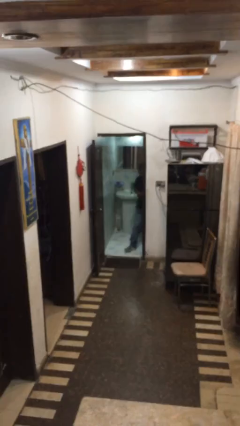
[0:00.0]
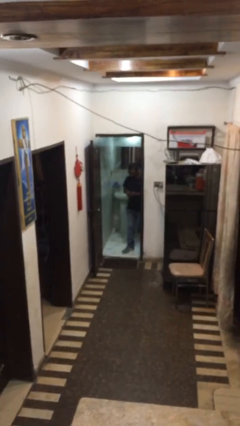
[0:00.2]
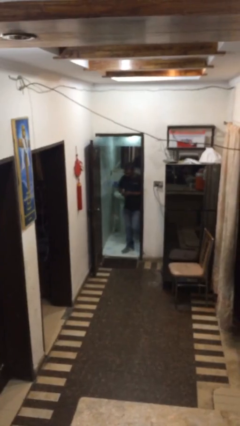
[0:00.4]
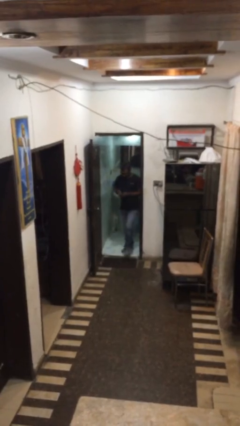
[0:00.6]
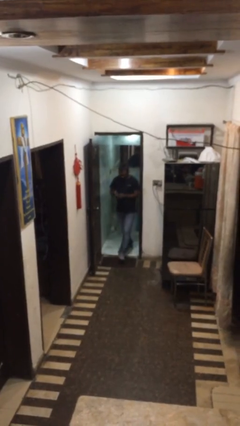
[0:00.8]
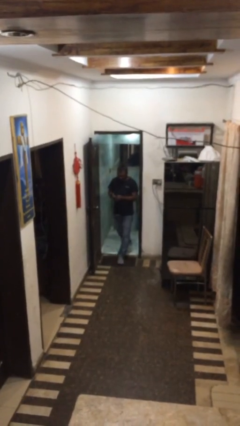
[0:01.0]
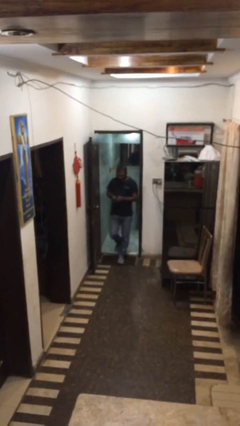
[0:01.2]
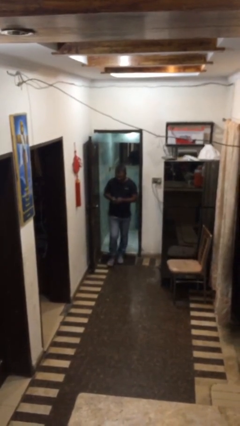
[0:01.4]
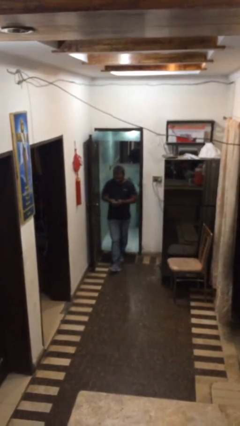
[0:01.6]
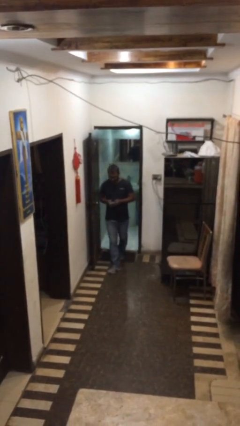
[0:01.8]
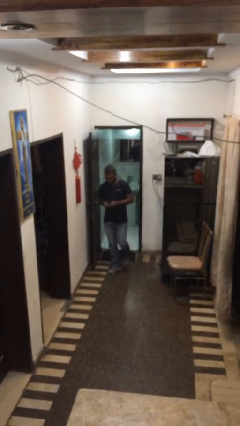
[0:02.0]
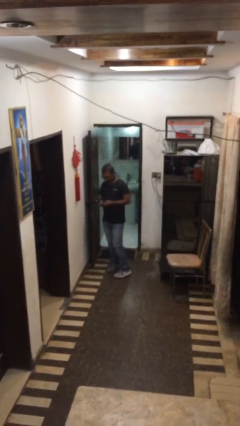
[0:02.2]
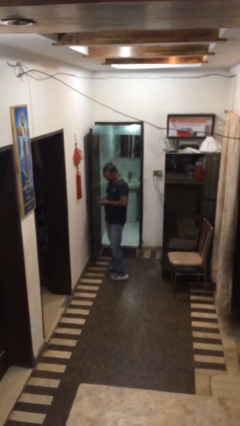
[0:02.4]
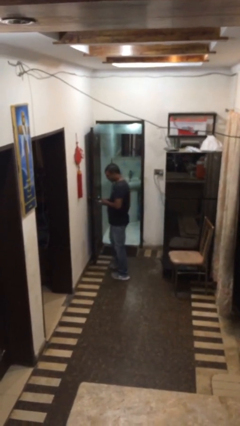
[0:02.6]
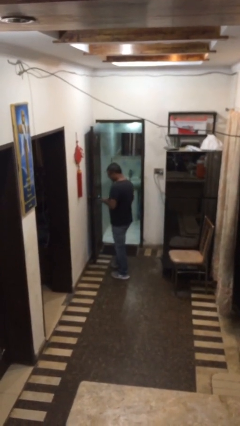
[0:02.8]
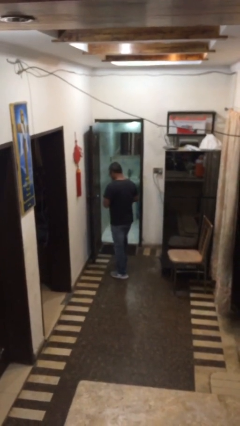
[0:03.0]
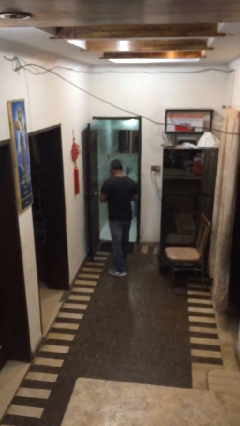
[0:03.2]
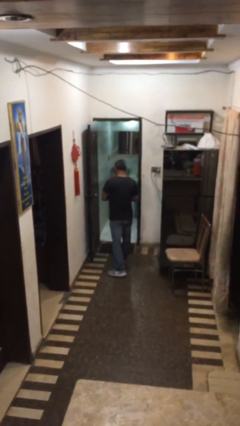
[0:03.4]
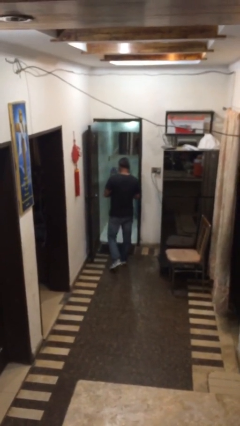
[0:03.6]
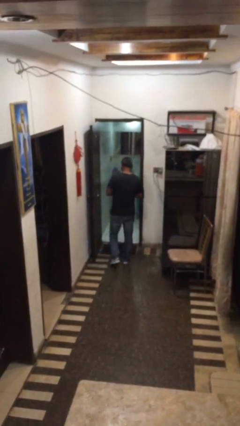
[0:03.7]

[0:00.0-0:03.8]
person enters scene through structure

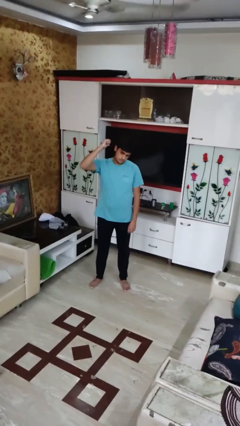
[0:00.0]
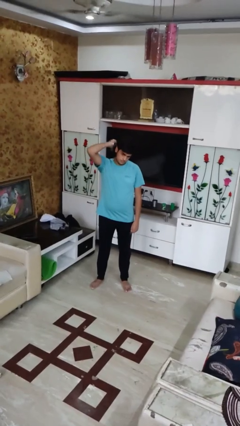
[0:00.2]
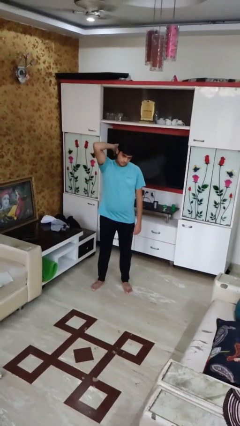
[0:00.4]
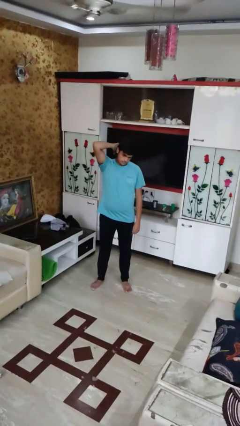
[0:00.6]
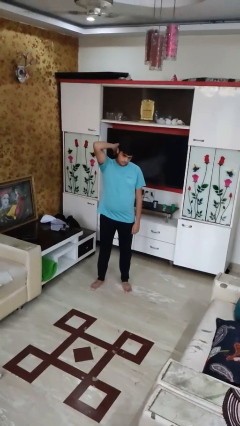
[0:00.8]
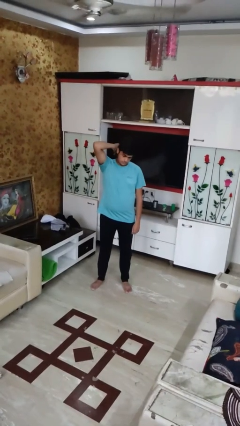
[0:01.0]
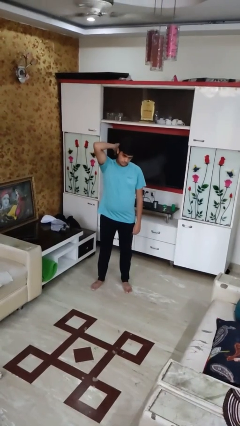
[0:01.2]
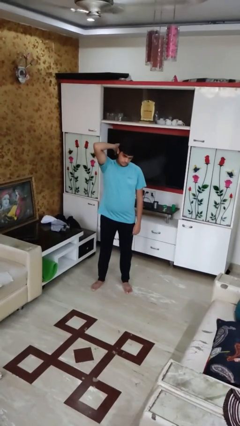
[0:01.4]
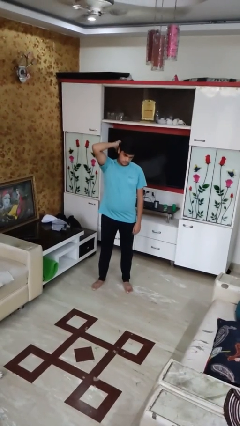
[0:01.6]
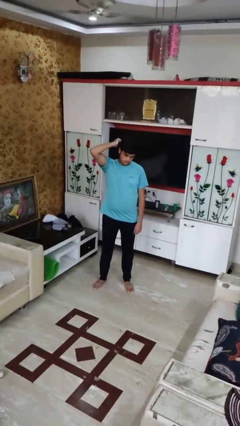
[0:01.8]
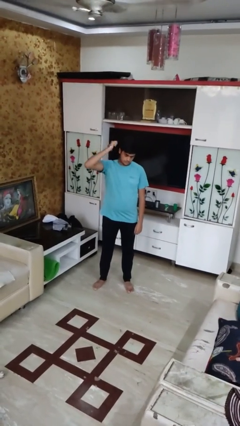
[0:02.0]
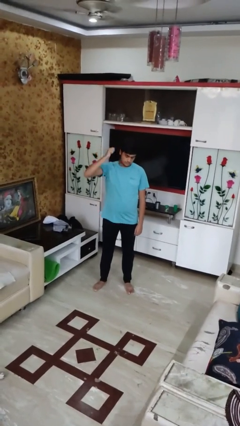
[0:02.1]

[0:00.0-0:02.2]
person gestures behind me

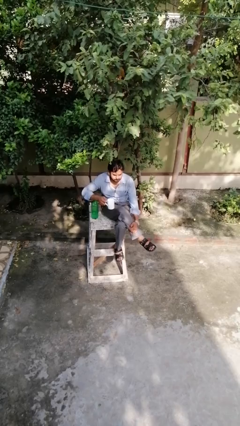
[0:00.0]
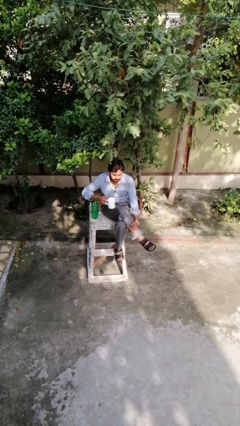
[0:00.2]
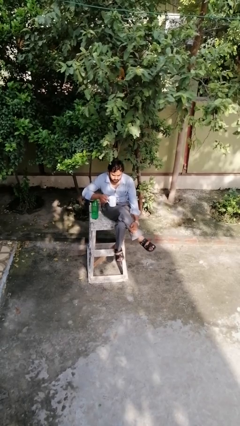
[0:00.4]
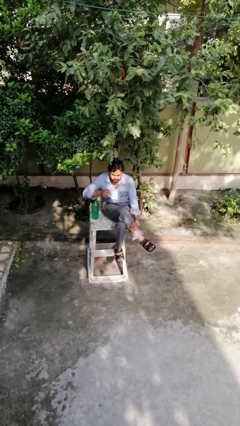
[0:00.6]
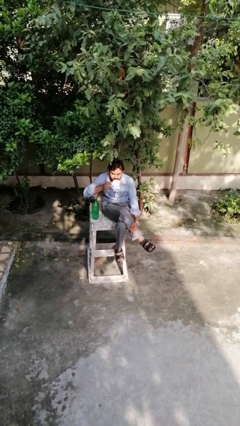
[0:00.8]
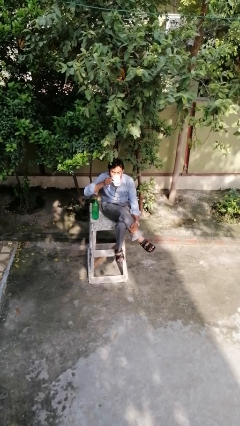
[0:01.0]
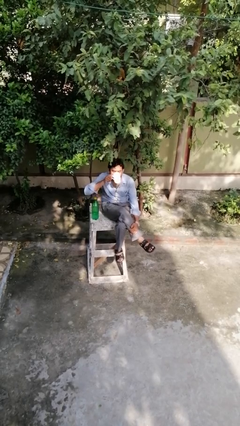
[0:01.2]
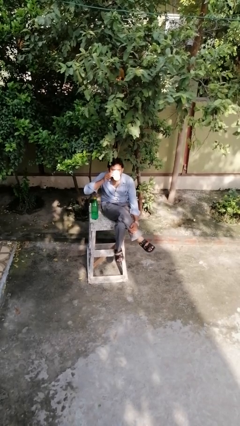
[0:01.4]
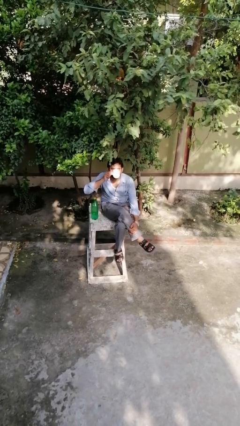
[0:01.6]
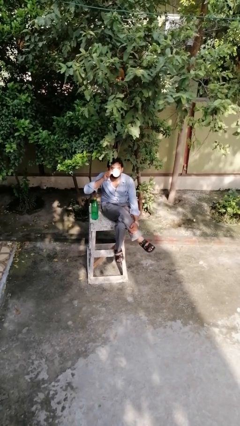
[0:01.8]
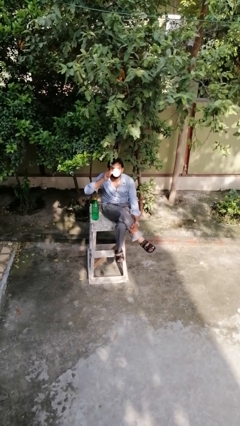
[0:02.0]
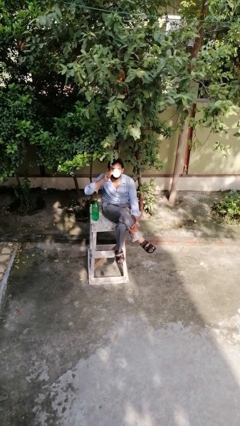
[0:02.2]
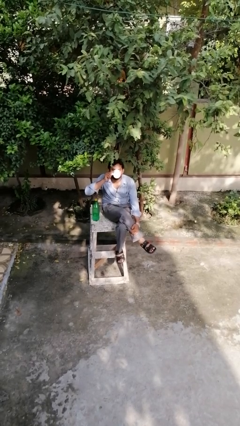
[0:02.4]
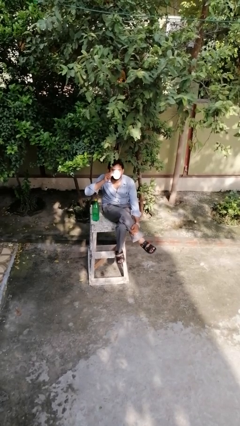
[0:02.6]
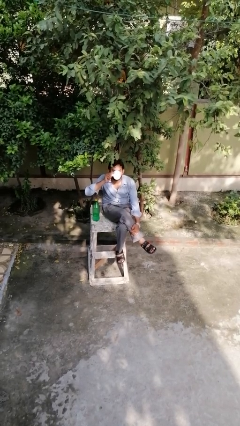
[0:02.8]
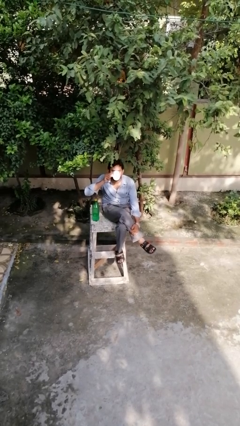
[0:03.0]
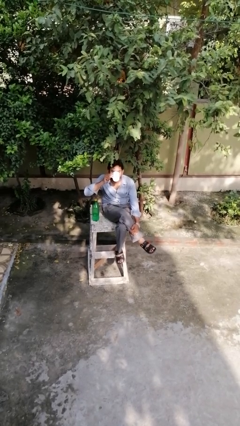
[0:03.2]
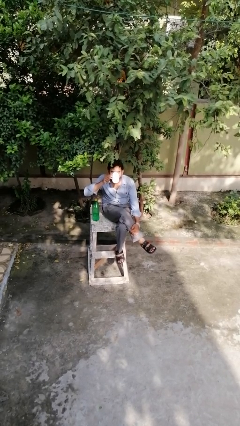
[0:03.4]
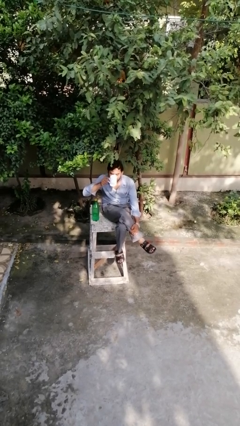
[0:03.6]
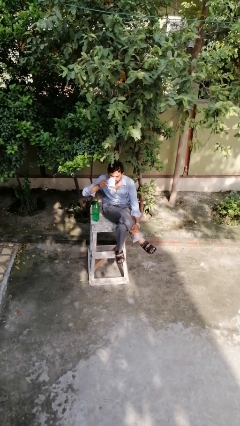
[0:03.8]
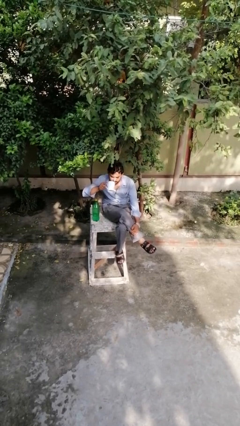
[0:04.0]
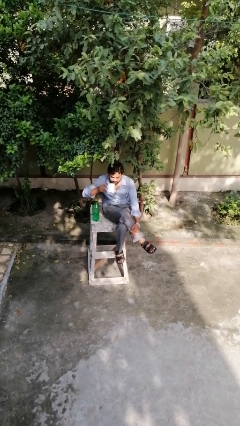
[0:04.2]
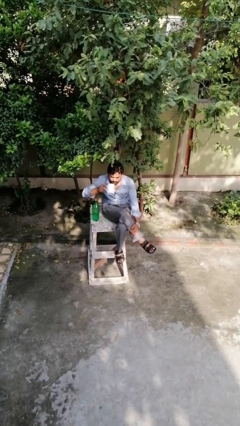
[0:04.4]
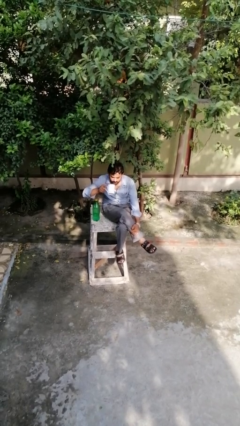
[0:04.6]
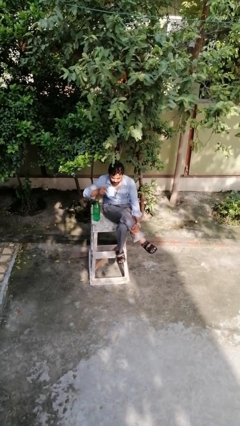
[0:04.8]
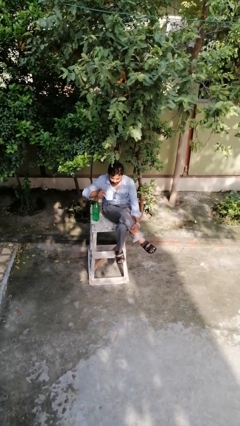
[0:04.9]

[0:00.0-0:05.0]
person drinks from mug

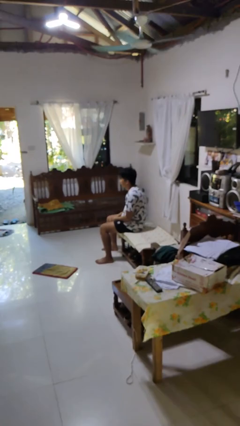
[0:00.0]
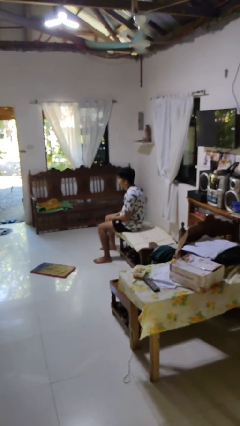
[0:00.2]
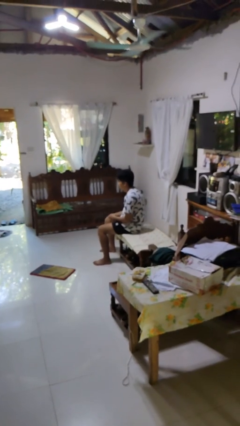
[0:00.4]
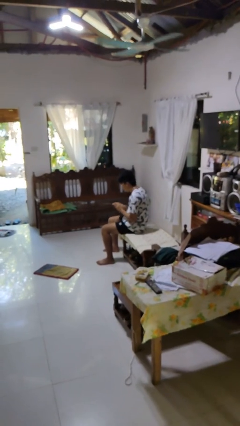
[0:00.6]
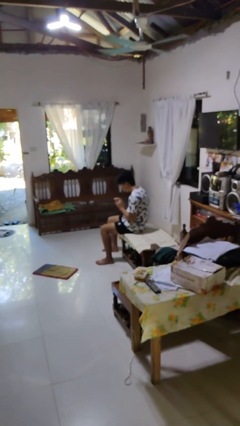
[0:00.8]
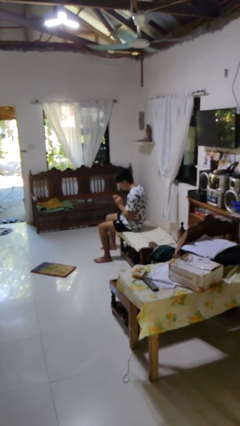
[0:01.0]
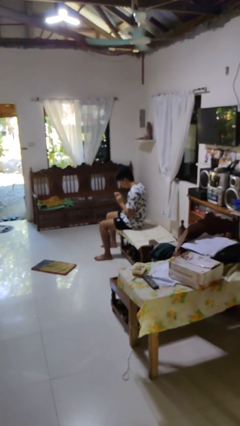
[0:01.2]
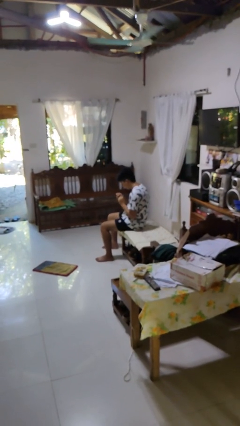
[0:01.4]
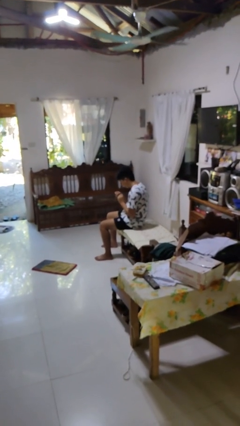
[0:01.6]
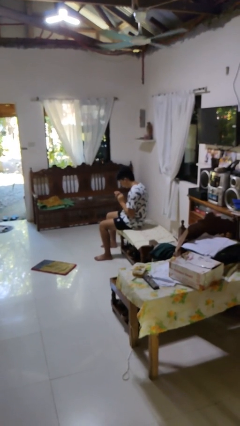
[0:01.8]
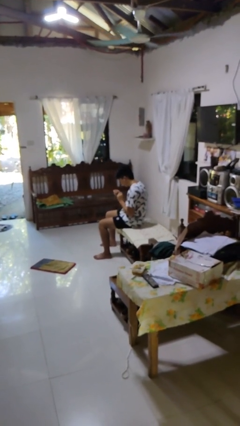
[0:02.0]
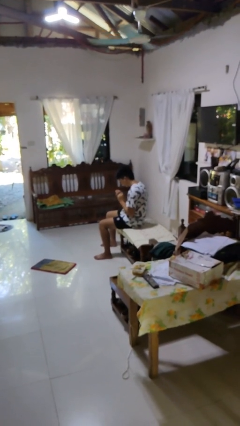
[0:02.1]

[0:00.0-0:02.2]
person files fingernails

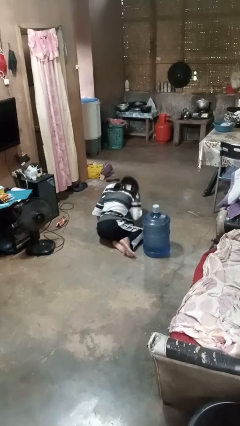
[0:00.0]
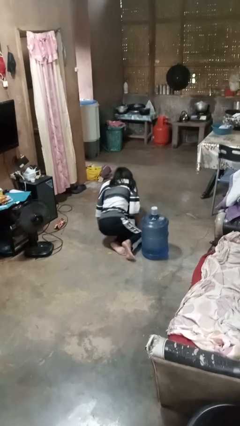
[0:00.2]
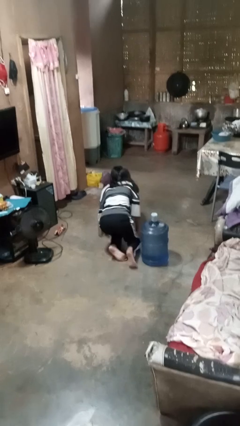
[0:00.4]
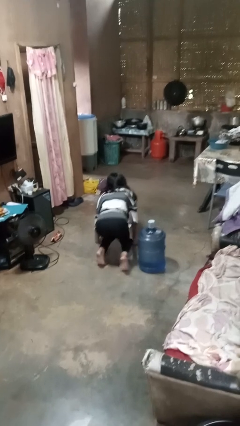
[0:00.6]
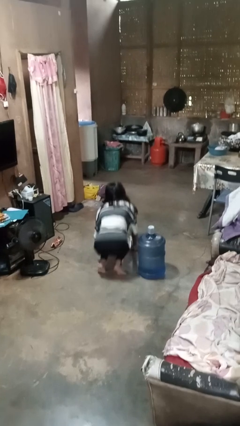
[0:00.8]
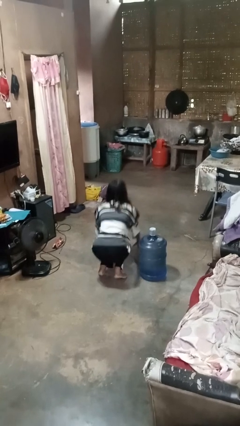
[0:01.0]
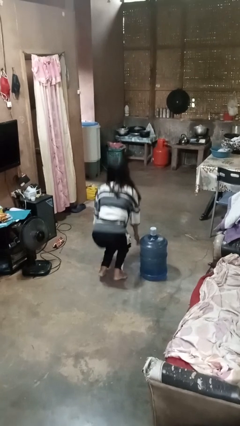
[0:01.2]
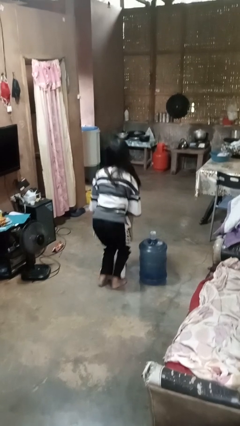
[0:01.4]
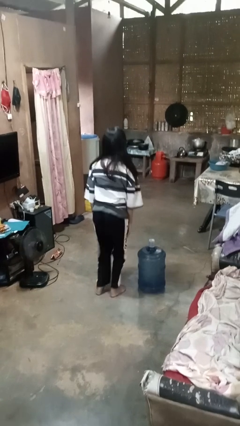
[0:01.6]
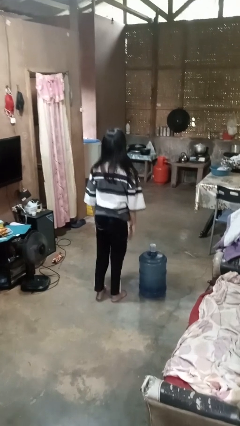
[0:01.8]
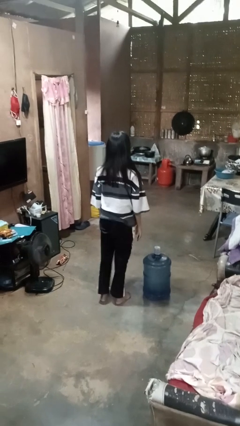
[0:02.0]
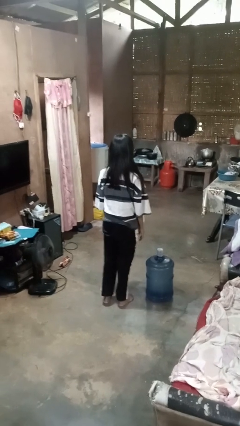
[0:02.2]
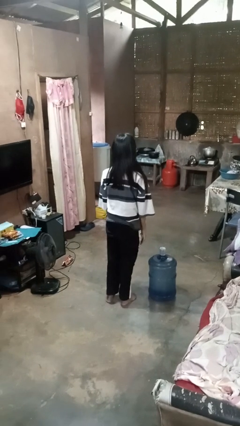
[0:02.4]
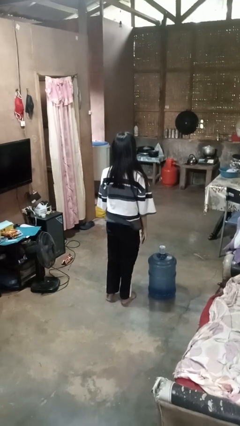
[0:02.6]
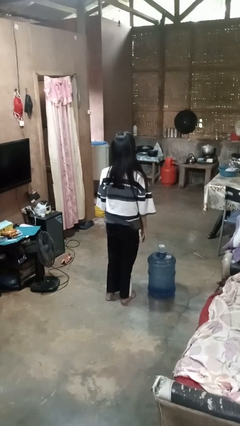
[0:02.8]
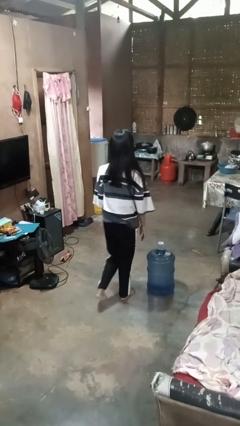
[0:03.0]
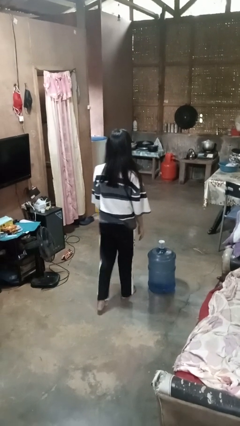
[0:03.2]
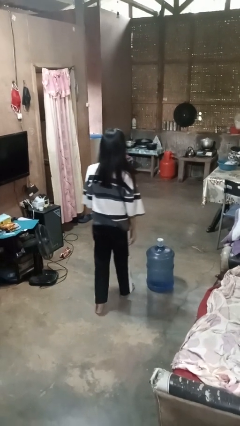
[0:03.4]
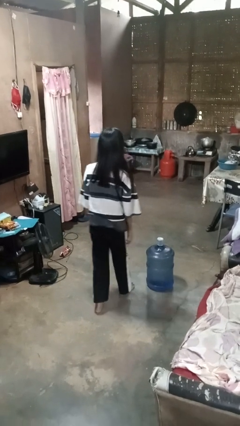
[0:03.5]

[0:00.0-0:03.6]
person stands up from floor

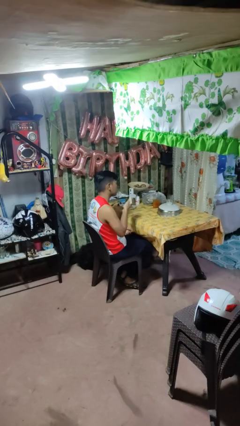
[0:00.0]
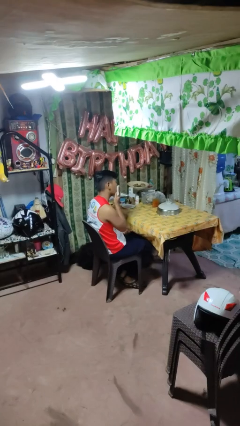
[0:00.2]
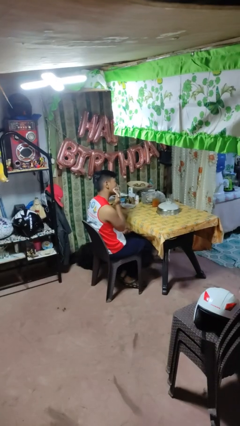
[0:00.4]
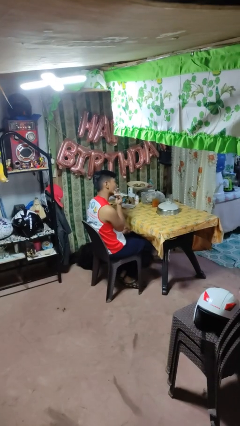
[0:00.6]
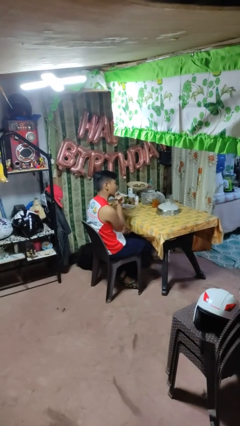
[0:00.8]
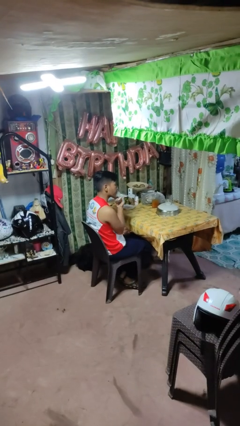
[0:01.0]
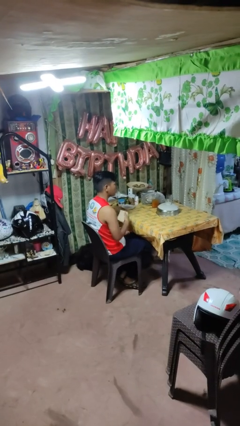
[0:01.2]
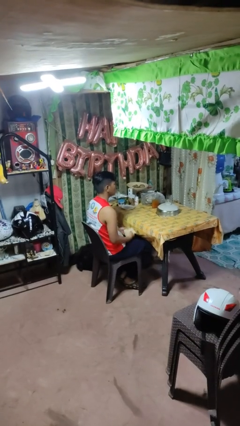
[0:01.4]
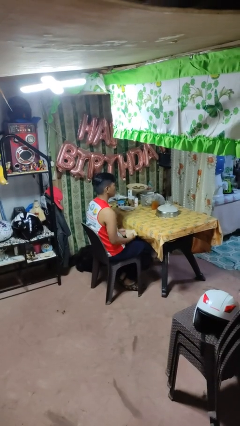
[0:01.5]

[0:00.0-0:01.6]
person wipes mouth with napkin
